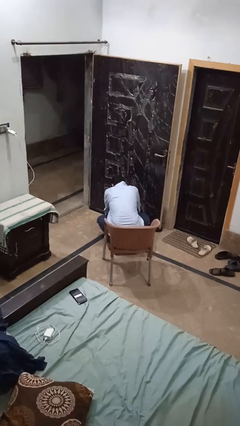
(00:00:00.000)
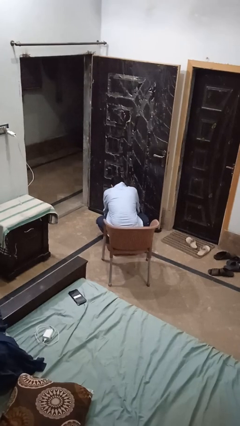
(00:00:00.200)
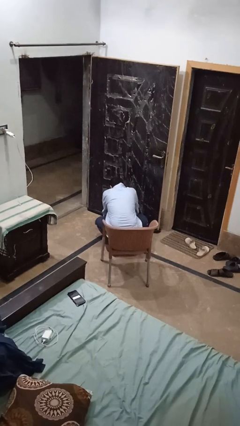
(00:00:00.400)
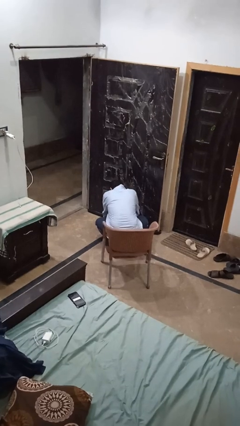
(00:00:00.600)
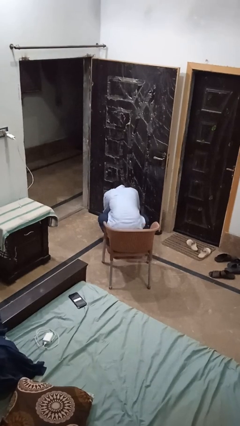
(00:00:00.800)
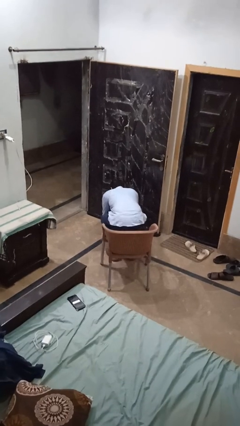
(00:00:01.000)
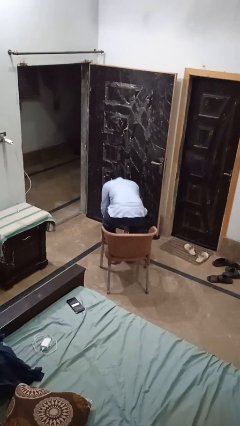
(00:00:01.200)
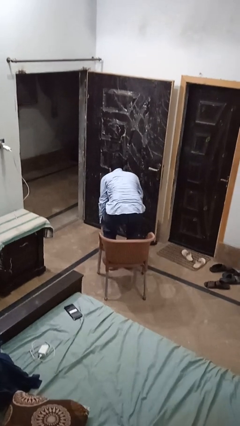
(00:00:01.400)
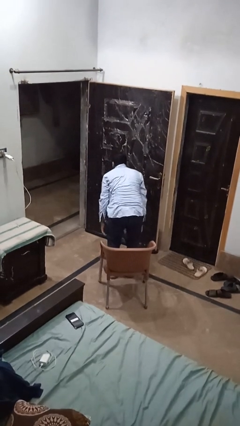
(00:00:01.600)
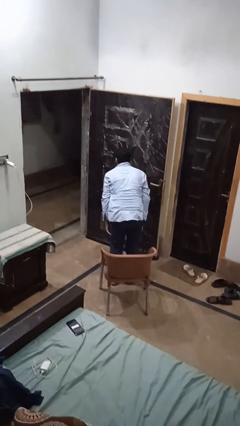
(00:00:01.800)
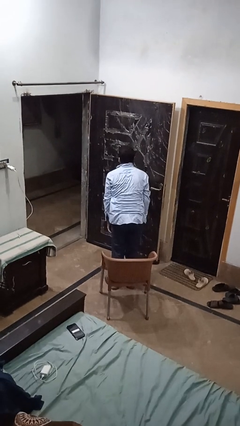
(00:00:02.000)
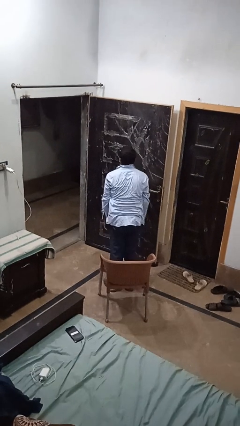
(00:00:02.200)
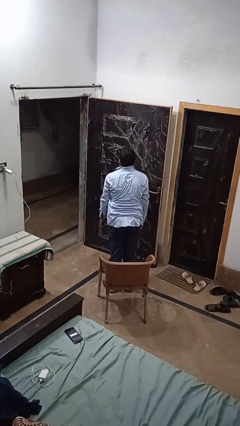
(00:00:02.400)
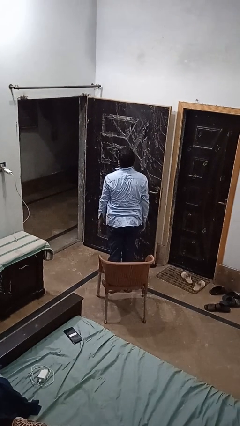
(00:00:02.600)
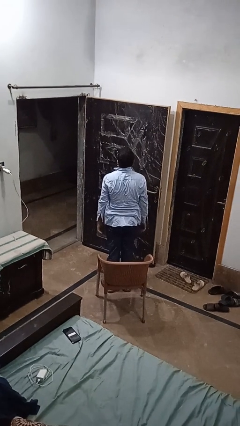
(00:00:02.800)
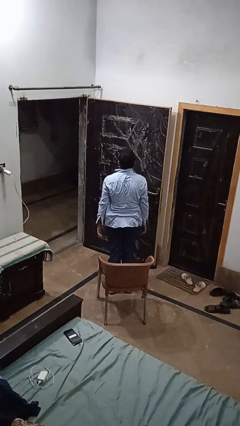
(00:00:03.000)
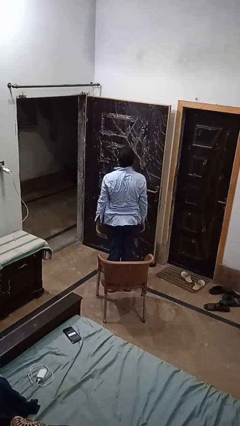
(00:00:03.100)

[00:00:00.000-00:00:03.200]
person stands up from floor

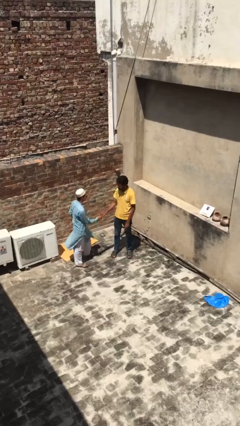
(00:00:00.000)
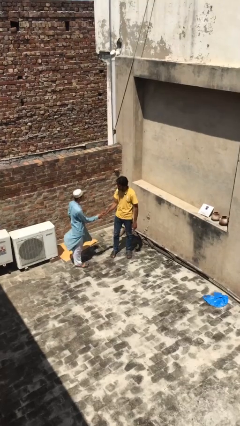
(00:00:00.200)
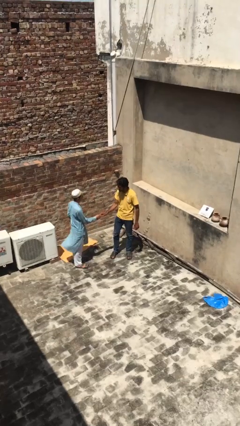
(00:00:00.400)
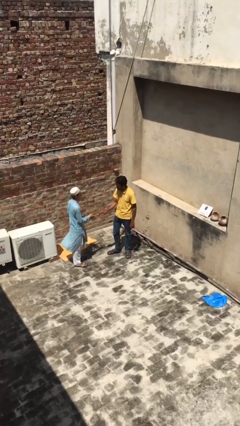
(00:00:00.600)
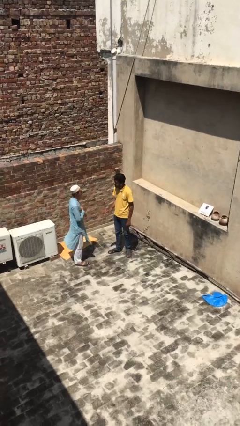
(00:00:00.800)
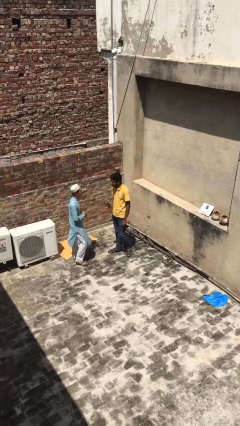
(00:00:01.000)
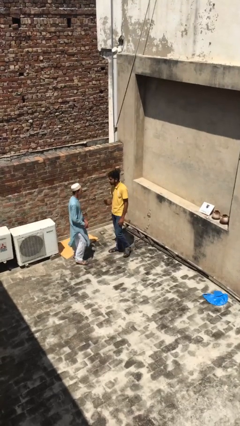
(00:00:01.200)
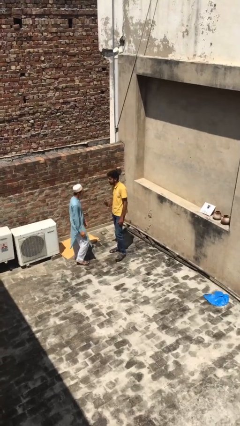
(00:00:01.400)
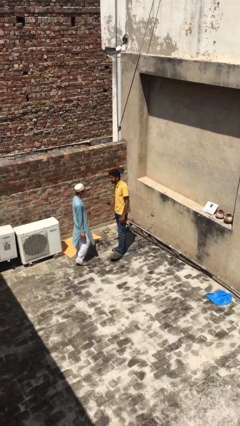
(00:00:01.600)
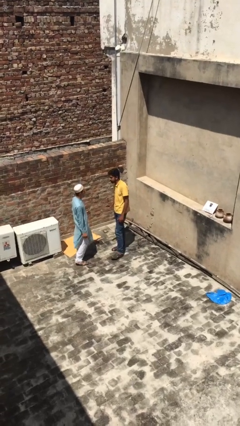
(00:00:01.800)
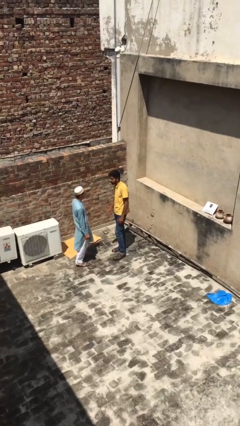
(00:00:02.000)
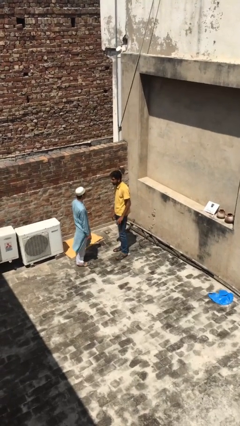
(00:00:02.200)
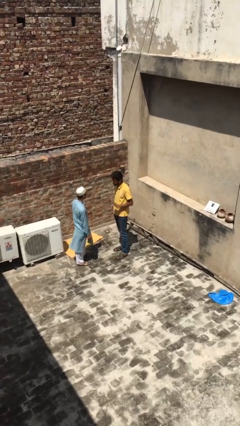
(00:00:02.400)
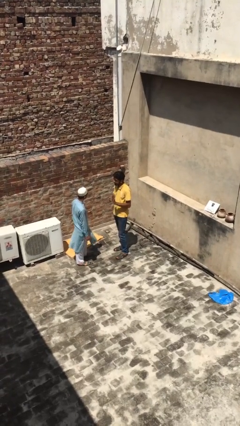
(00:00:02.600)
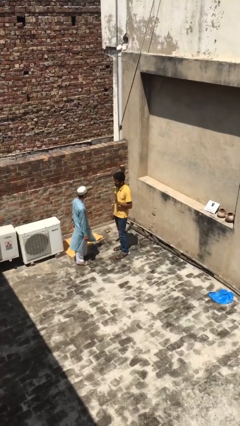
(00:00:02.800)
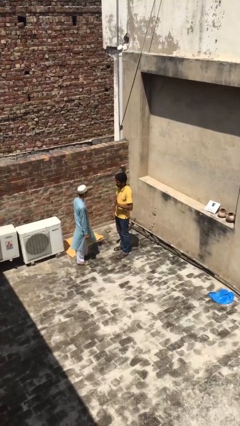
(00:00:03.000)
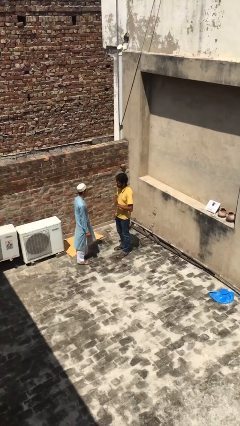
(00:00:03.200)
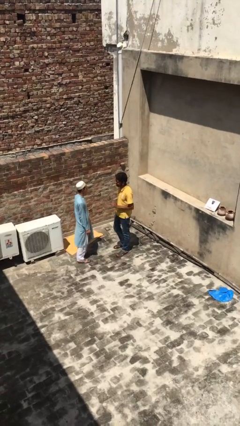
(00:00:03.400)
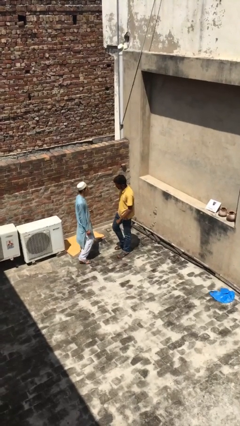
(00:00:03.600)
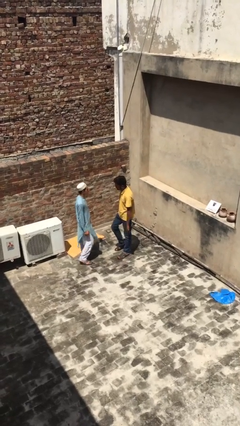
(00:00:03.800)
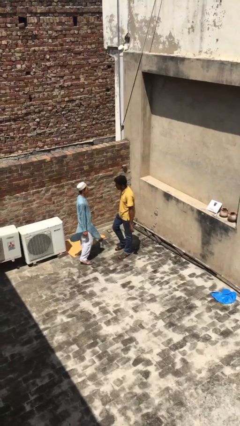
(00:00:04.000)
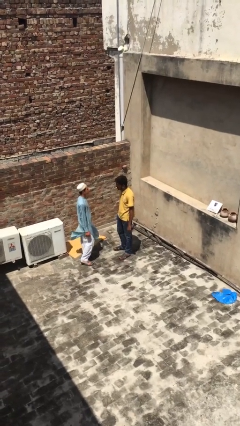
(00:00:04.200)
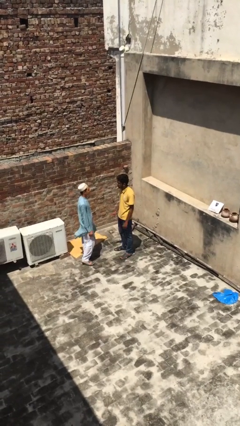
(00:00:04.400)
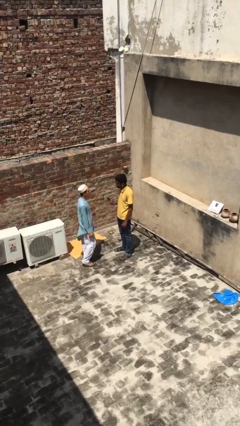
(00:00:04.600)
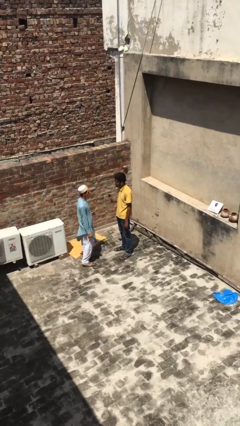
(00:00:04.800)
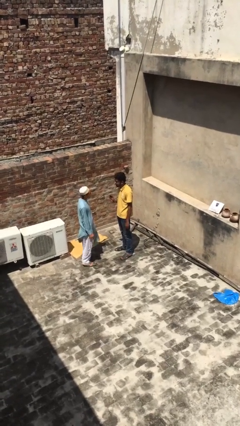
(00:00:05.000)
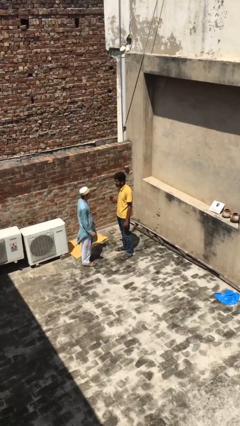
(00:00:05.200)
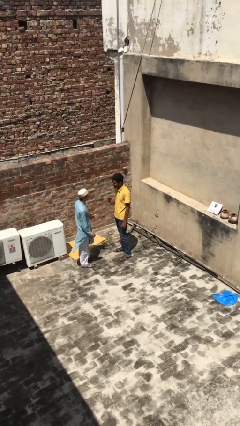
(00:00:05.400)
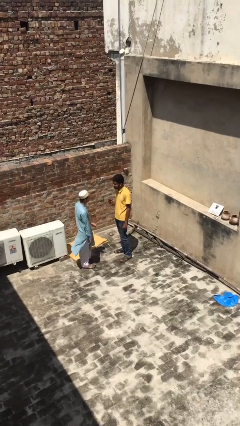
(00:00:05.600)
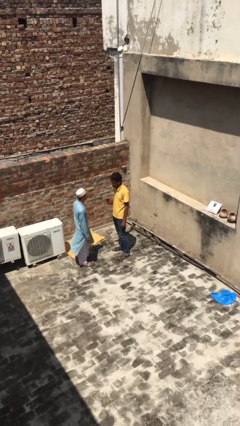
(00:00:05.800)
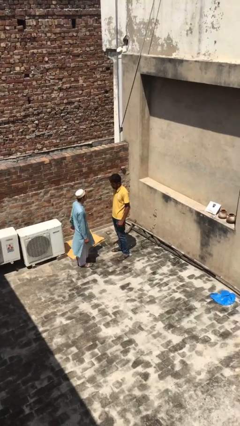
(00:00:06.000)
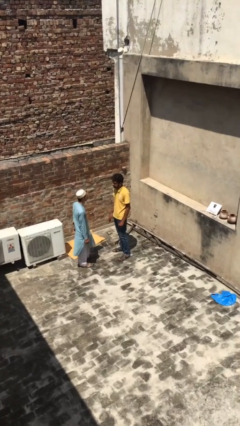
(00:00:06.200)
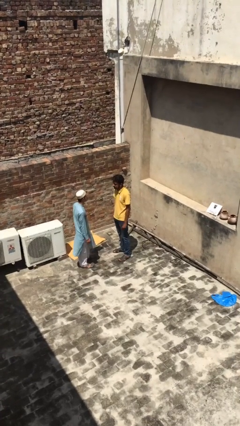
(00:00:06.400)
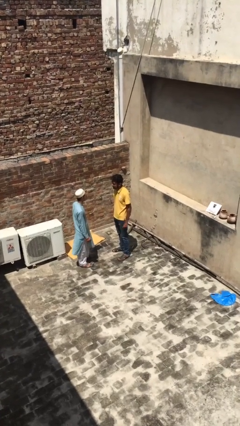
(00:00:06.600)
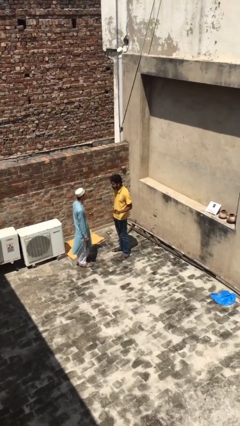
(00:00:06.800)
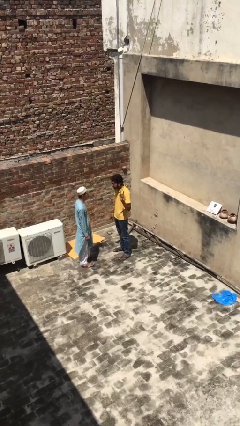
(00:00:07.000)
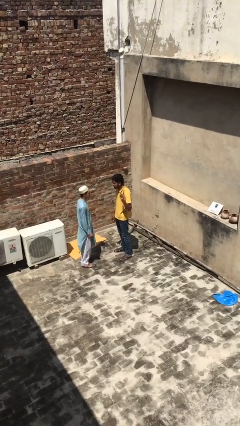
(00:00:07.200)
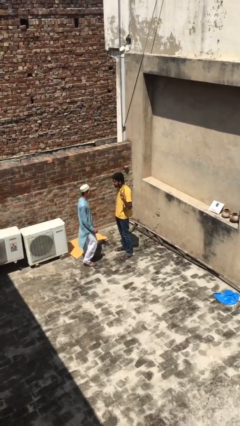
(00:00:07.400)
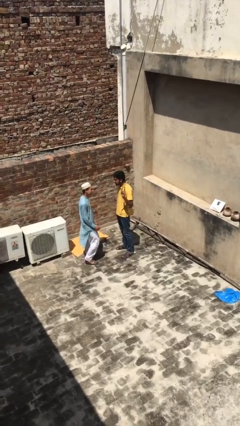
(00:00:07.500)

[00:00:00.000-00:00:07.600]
person talks to person

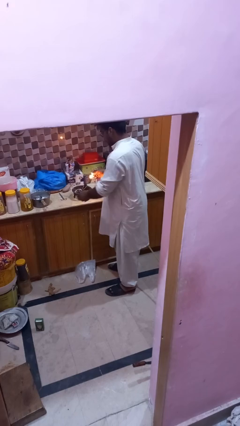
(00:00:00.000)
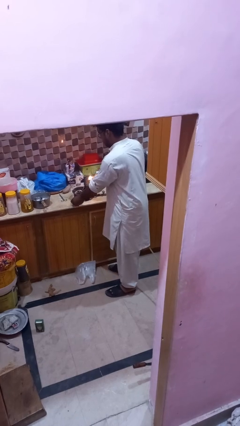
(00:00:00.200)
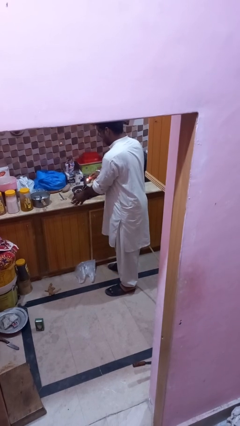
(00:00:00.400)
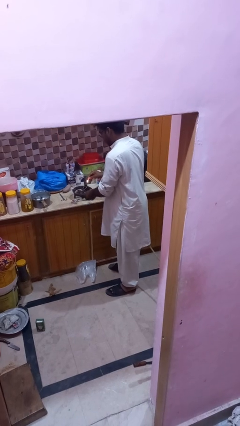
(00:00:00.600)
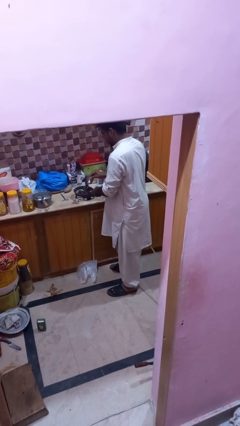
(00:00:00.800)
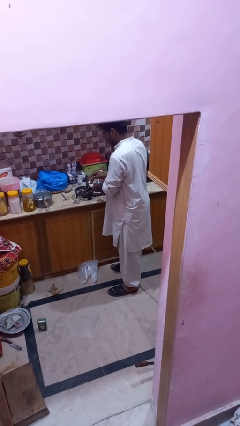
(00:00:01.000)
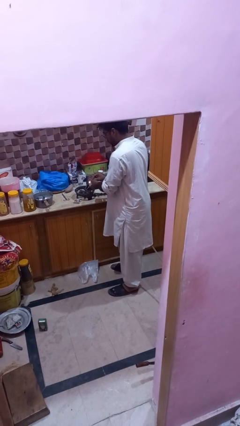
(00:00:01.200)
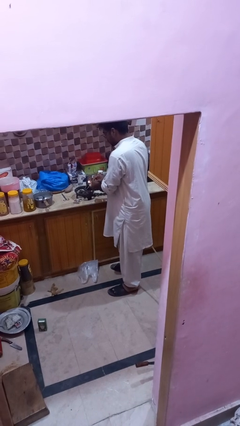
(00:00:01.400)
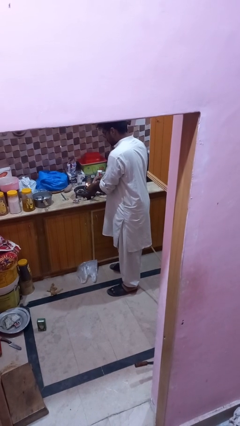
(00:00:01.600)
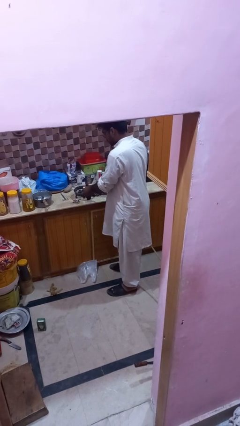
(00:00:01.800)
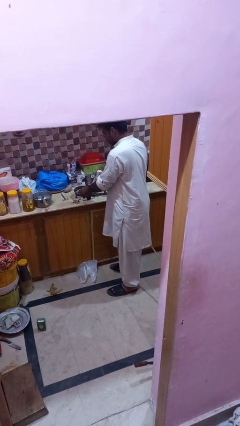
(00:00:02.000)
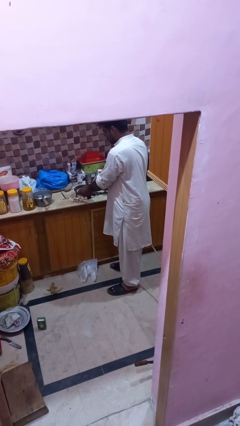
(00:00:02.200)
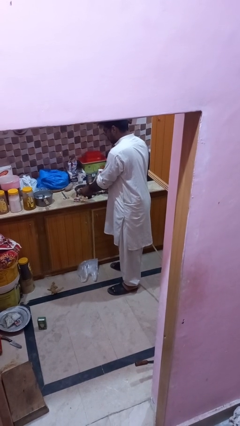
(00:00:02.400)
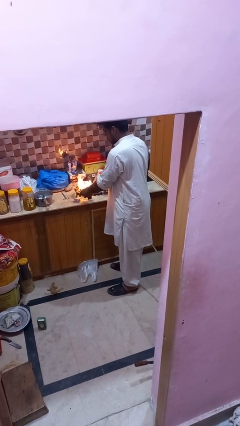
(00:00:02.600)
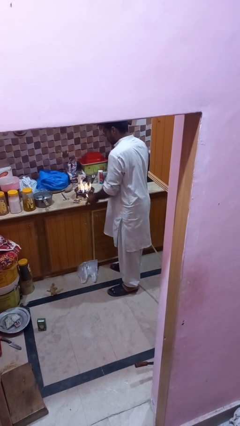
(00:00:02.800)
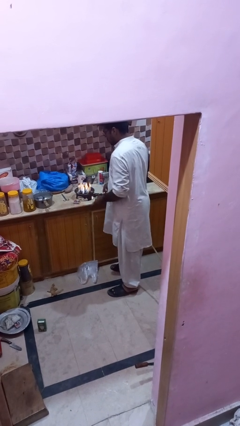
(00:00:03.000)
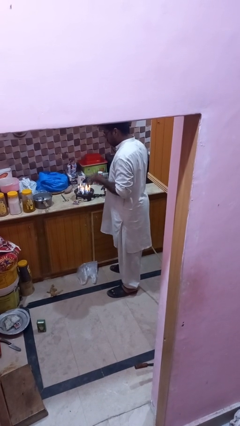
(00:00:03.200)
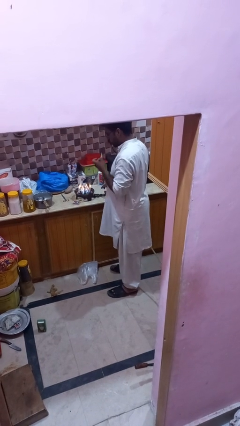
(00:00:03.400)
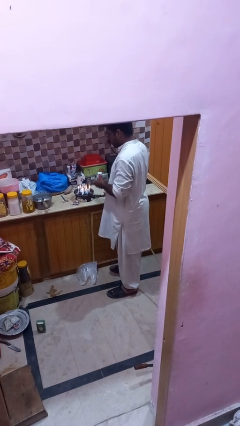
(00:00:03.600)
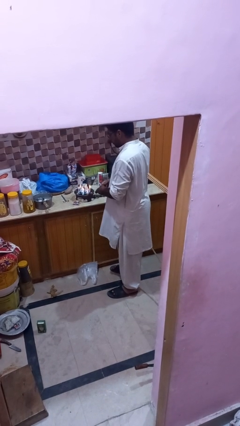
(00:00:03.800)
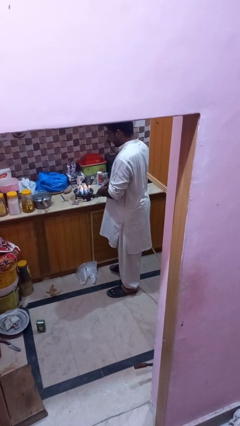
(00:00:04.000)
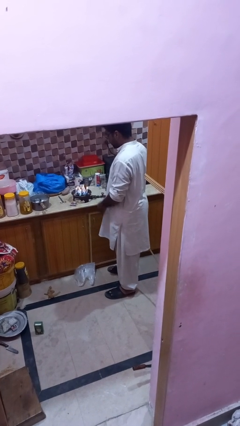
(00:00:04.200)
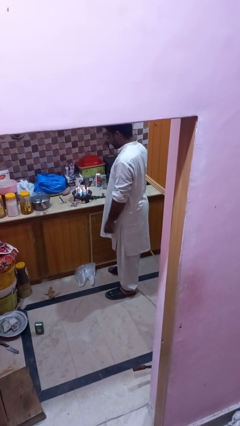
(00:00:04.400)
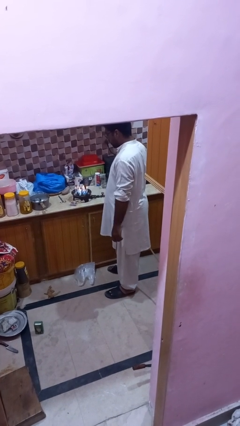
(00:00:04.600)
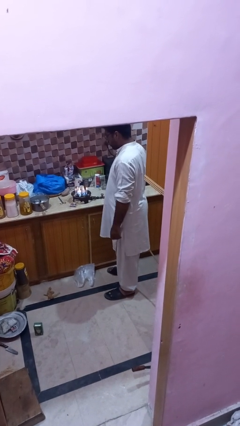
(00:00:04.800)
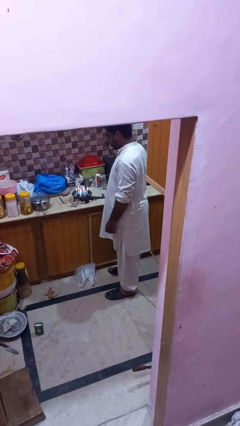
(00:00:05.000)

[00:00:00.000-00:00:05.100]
person turns on stovetop

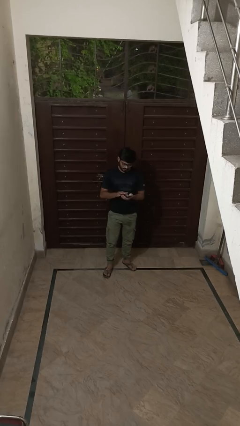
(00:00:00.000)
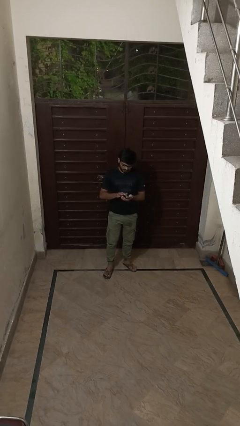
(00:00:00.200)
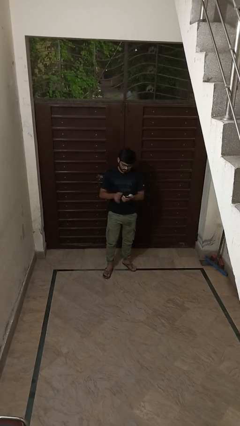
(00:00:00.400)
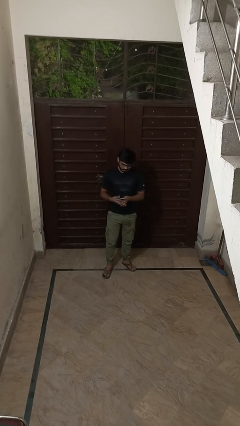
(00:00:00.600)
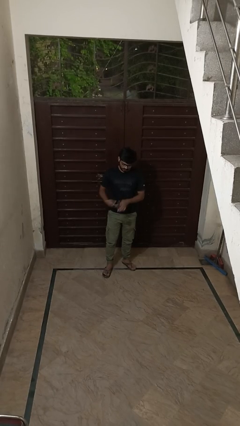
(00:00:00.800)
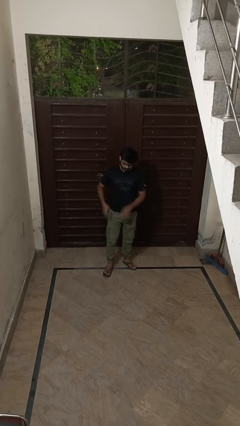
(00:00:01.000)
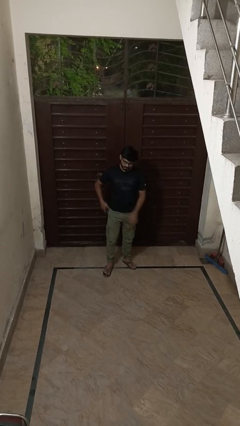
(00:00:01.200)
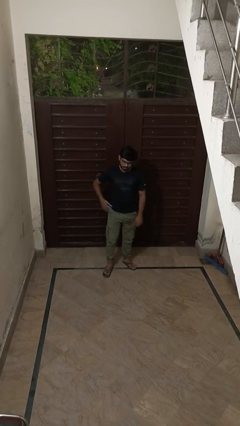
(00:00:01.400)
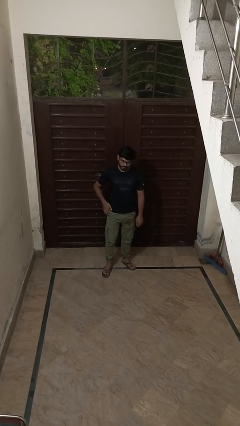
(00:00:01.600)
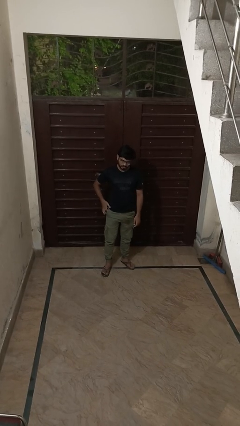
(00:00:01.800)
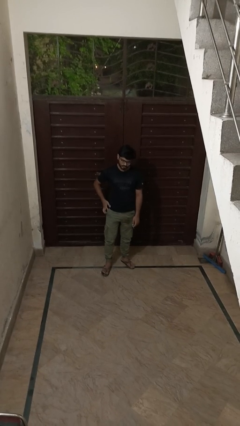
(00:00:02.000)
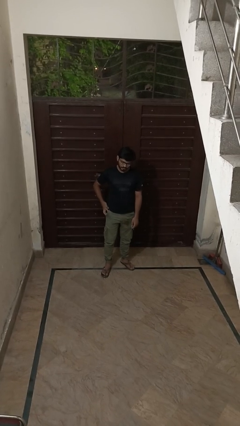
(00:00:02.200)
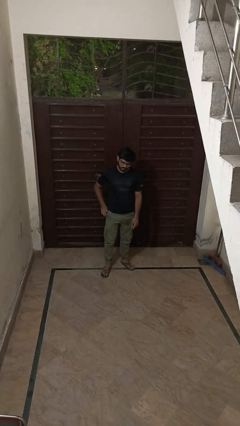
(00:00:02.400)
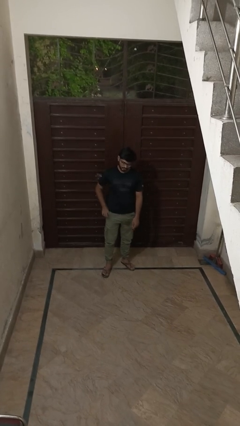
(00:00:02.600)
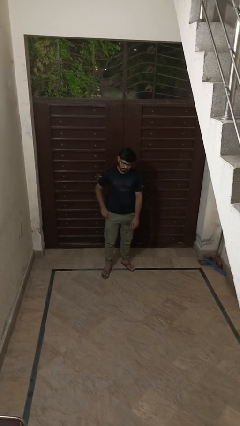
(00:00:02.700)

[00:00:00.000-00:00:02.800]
person puts phone into pocket
